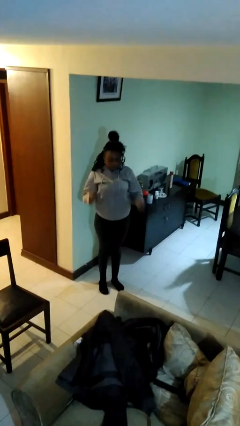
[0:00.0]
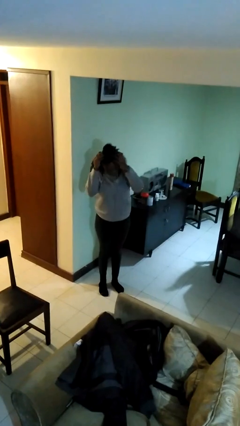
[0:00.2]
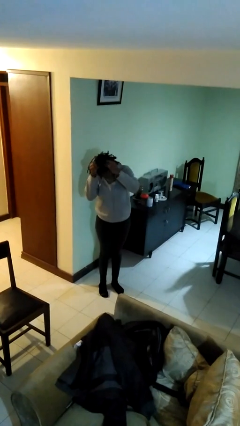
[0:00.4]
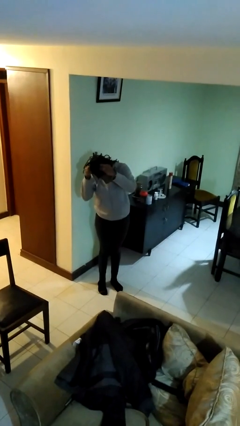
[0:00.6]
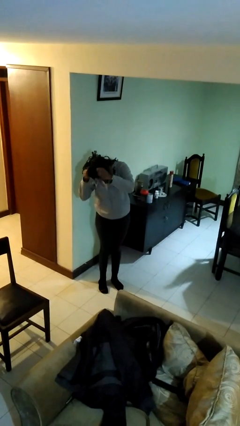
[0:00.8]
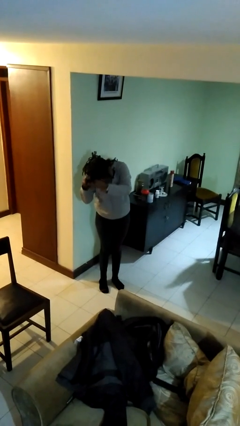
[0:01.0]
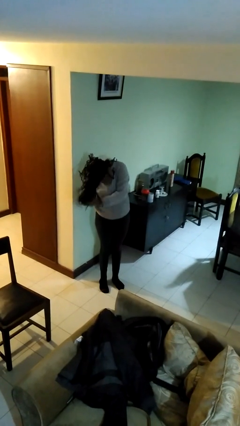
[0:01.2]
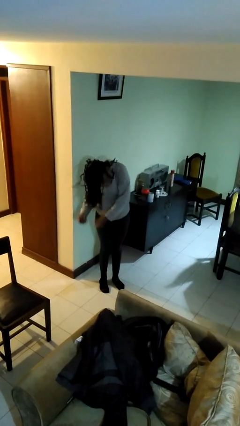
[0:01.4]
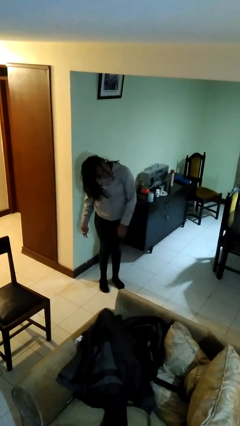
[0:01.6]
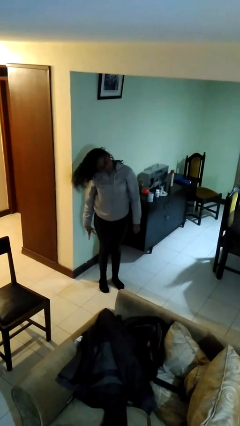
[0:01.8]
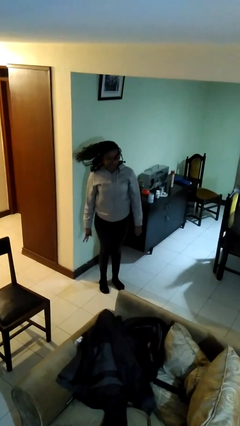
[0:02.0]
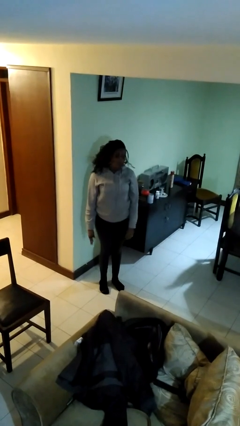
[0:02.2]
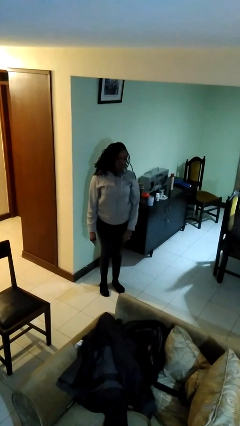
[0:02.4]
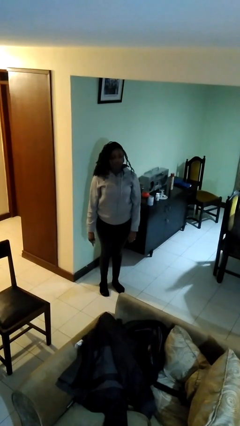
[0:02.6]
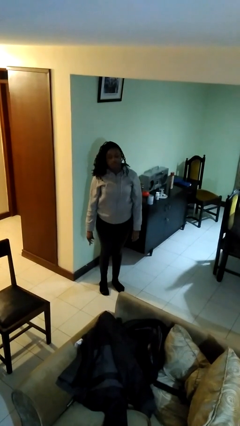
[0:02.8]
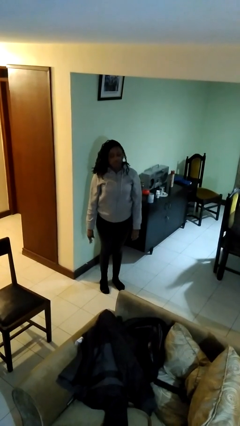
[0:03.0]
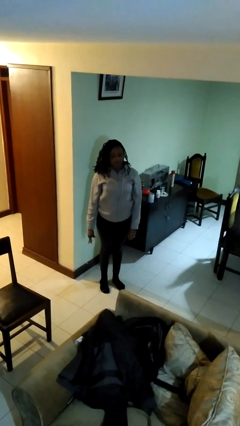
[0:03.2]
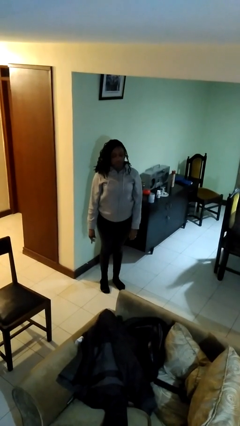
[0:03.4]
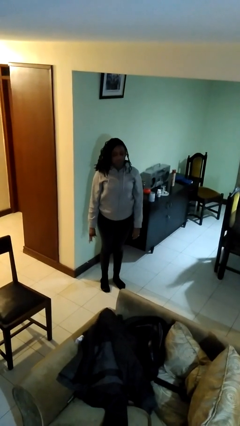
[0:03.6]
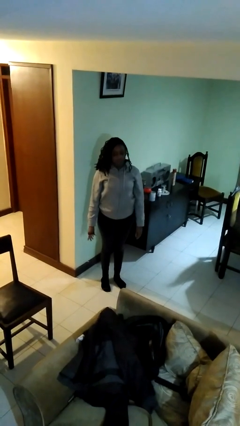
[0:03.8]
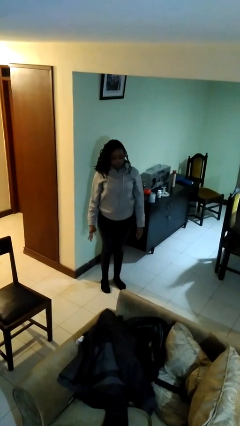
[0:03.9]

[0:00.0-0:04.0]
person takes off hairtie

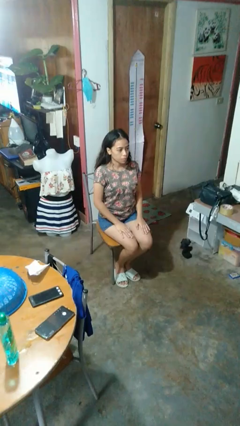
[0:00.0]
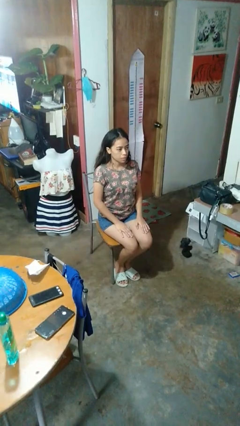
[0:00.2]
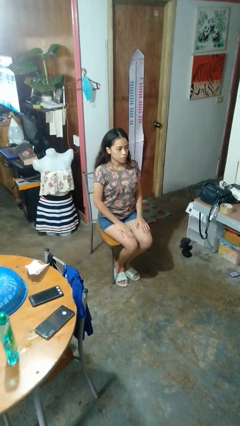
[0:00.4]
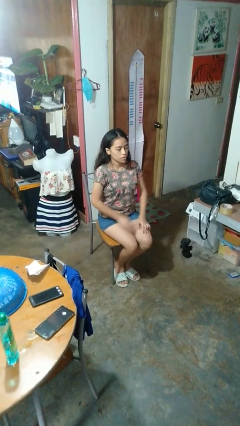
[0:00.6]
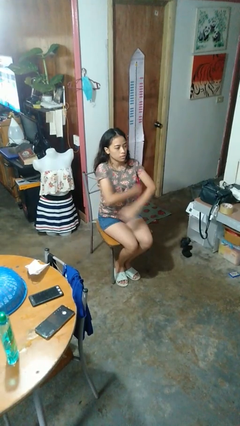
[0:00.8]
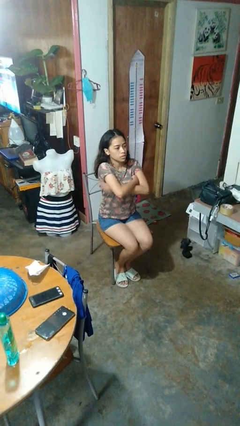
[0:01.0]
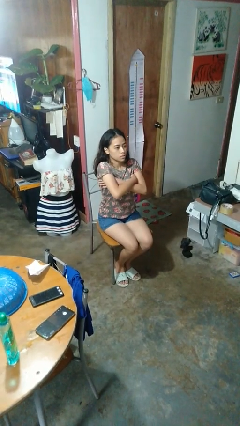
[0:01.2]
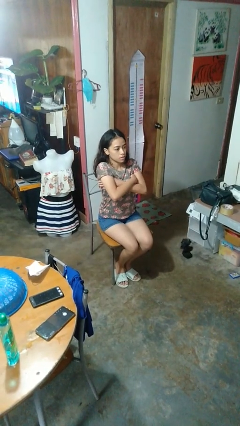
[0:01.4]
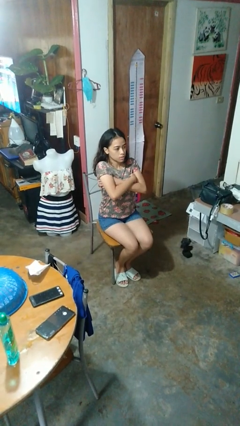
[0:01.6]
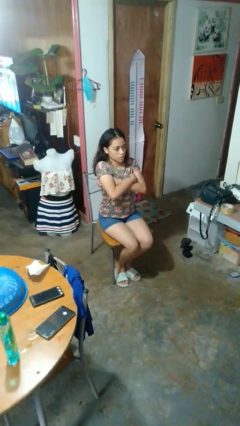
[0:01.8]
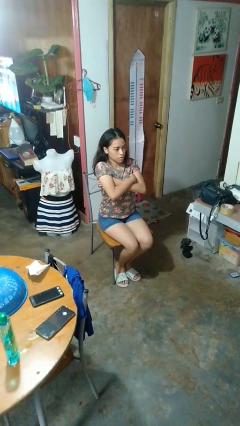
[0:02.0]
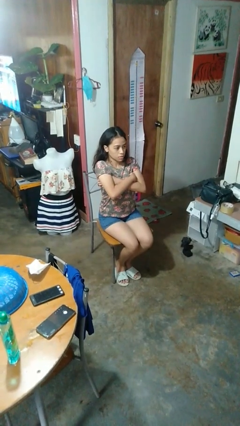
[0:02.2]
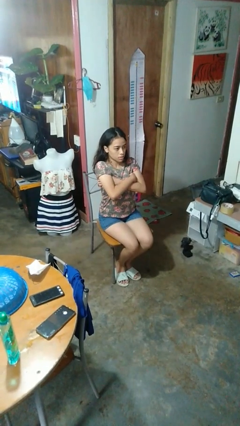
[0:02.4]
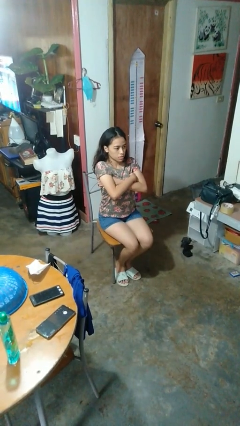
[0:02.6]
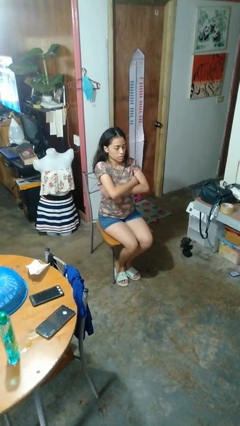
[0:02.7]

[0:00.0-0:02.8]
person crosses arms

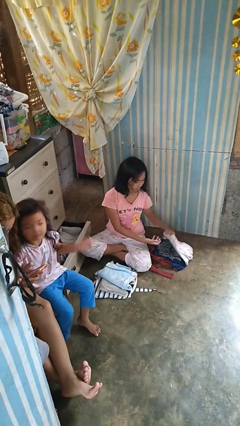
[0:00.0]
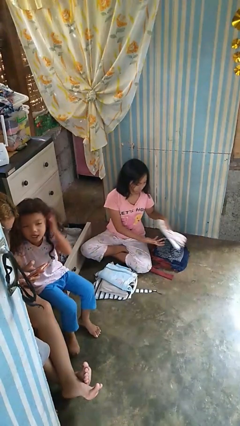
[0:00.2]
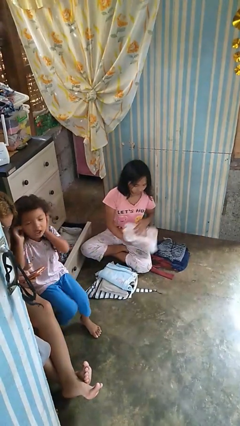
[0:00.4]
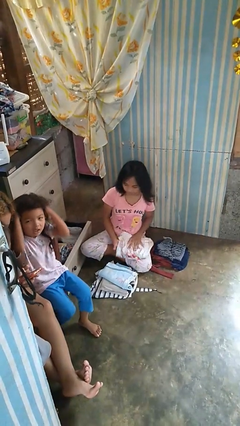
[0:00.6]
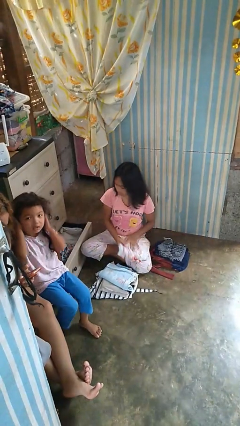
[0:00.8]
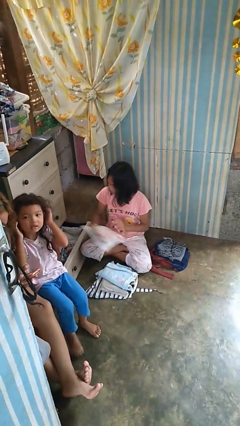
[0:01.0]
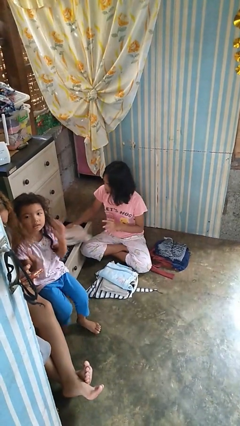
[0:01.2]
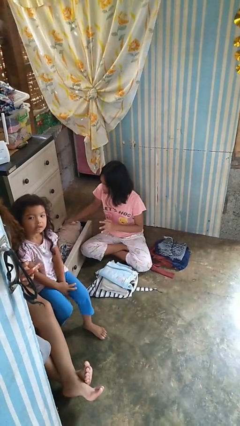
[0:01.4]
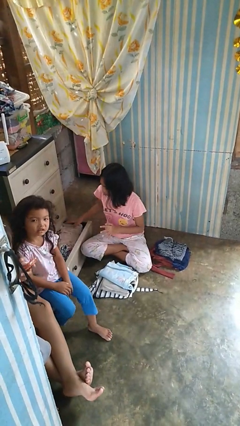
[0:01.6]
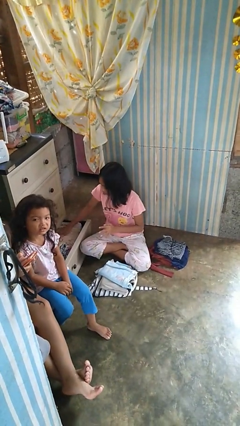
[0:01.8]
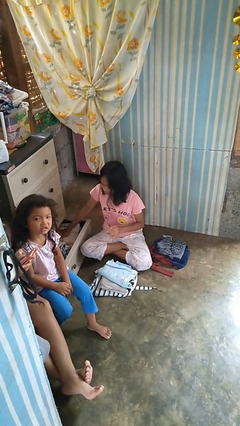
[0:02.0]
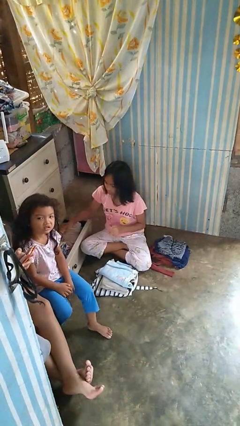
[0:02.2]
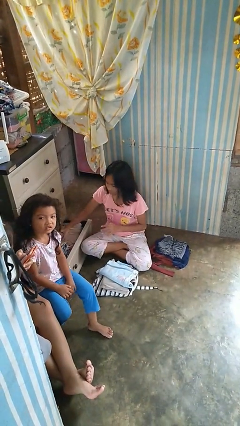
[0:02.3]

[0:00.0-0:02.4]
person puts clothes into dresser

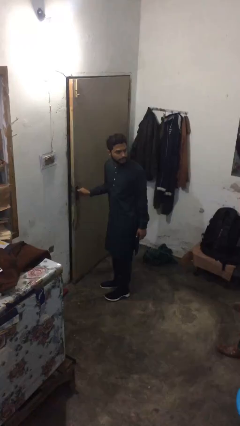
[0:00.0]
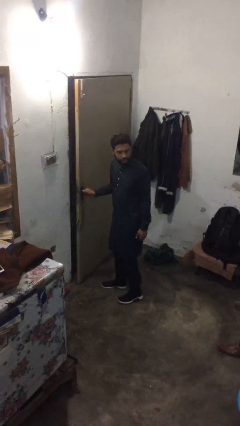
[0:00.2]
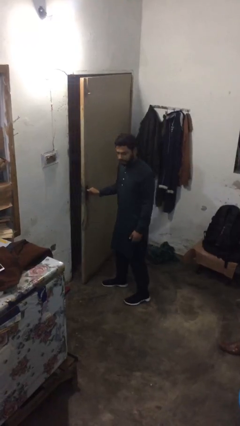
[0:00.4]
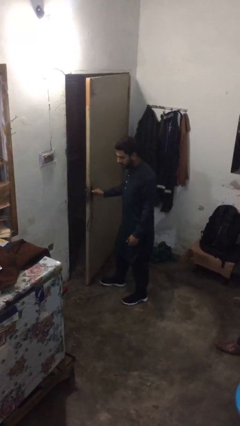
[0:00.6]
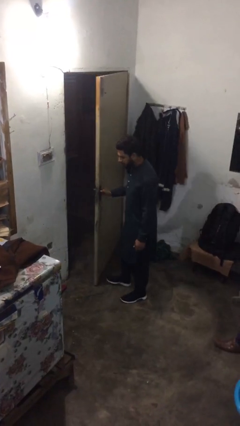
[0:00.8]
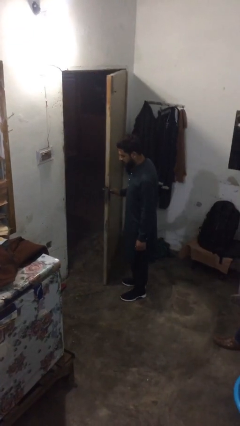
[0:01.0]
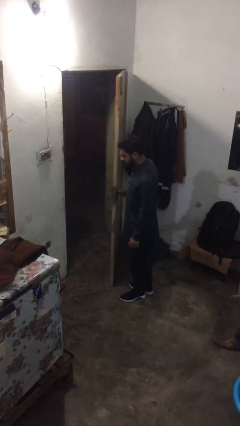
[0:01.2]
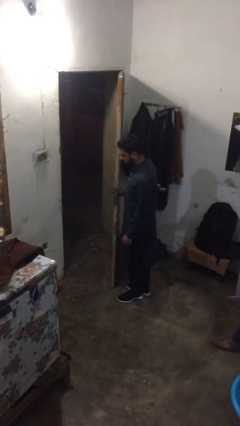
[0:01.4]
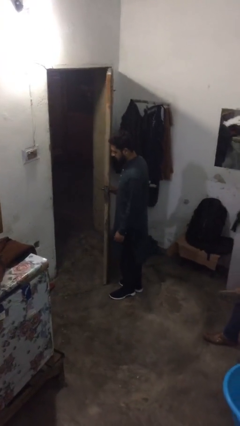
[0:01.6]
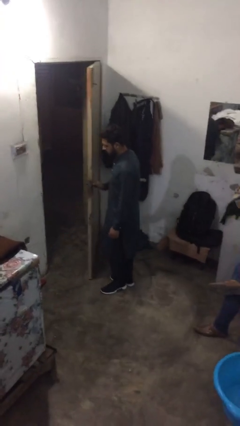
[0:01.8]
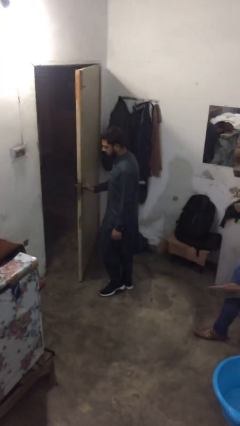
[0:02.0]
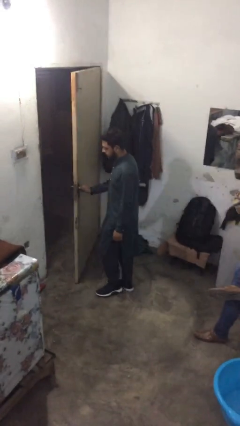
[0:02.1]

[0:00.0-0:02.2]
person opens facility door

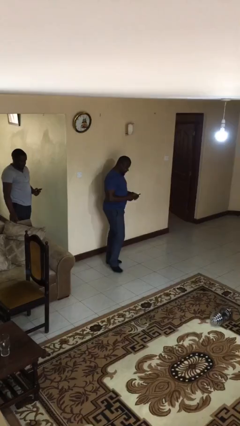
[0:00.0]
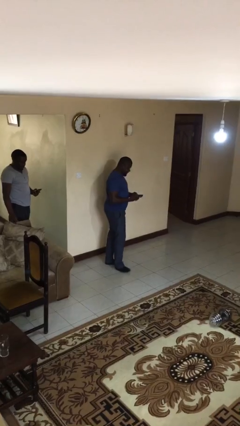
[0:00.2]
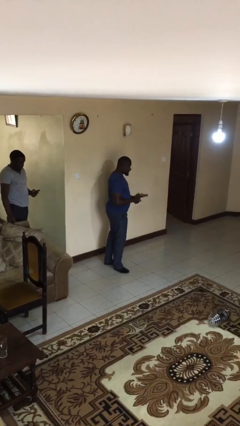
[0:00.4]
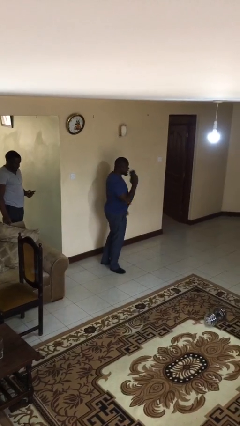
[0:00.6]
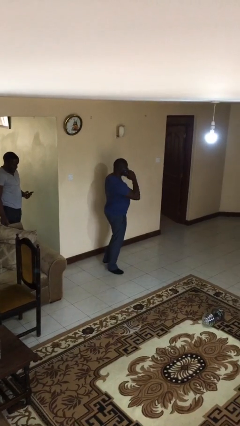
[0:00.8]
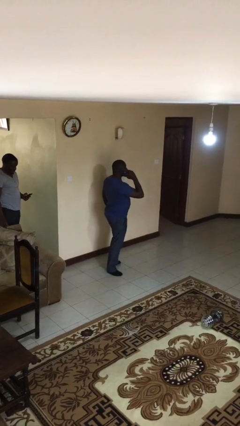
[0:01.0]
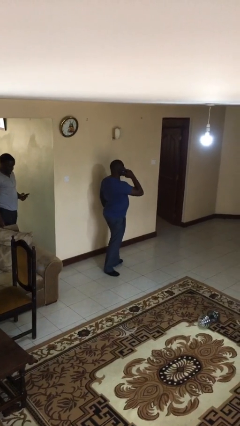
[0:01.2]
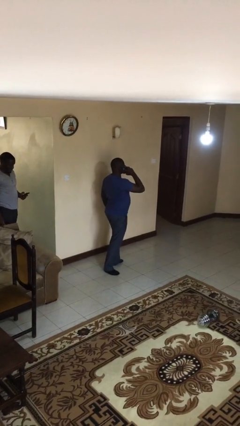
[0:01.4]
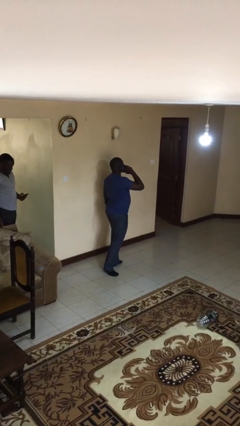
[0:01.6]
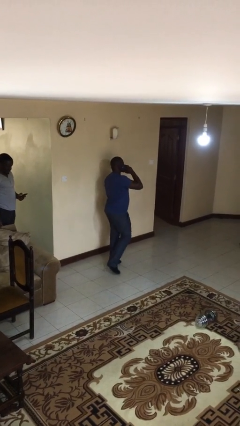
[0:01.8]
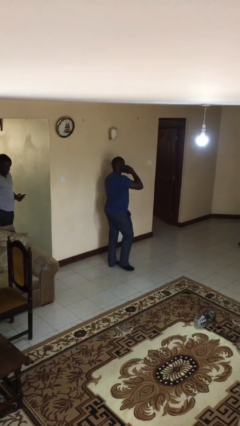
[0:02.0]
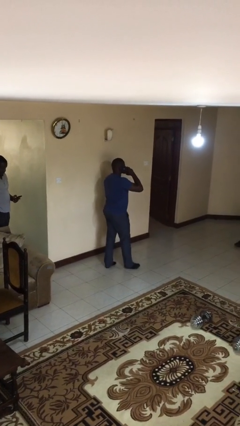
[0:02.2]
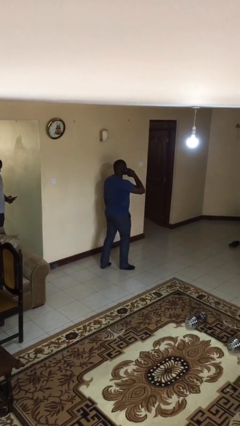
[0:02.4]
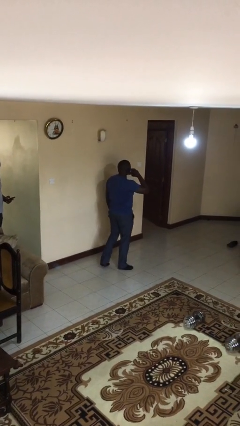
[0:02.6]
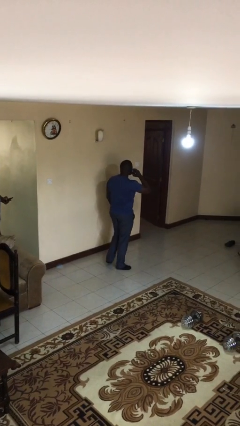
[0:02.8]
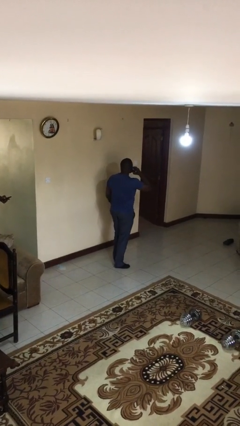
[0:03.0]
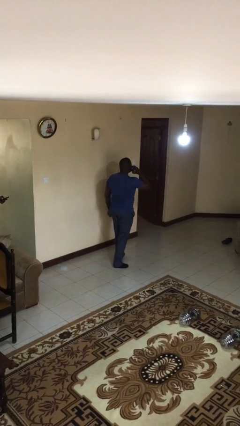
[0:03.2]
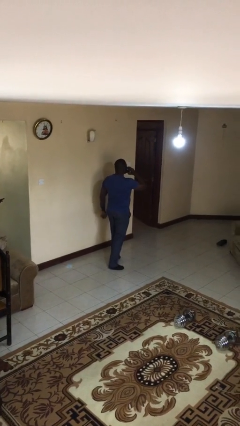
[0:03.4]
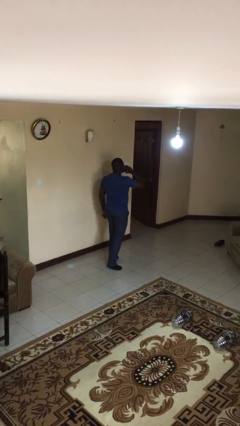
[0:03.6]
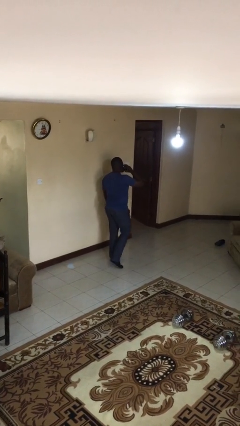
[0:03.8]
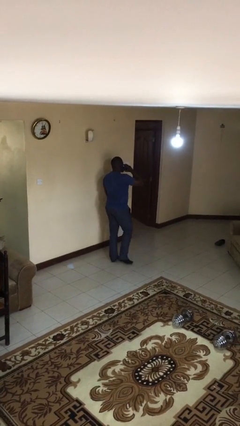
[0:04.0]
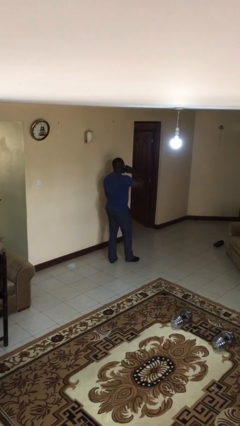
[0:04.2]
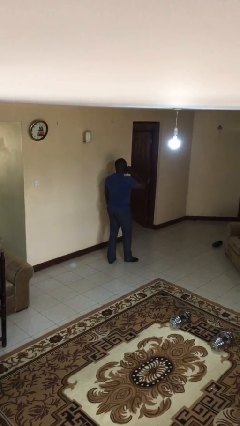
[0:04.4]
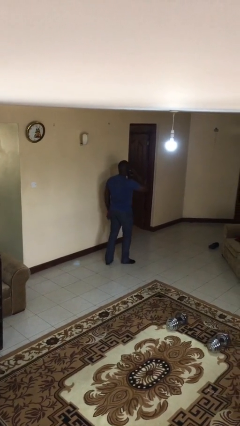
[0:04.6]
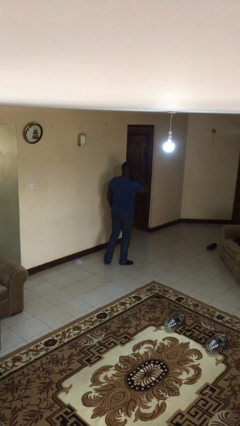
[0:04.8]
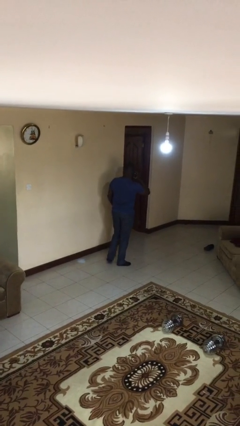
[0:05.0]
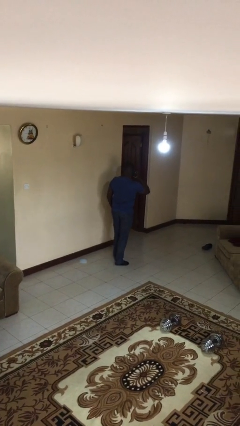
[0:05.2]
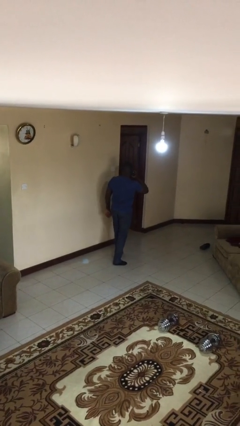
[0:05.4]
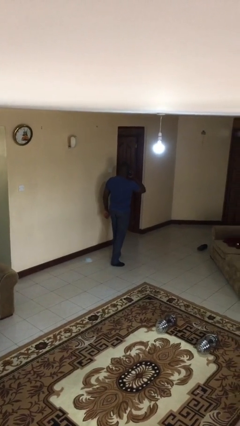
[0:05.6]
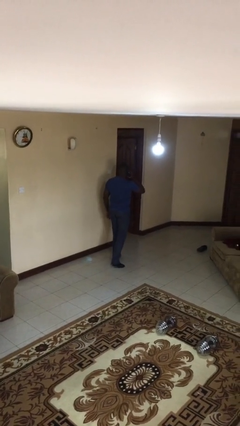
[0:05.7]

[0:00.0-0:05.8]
person talks on phone

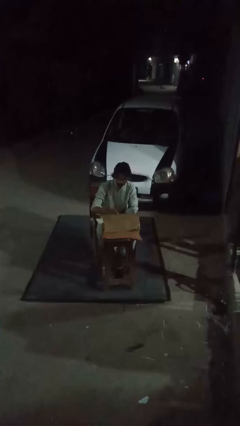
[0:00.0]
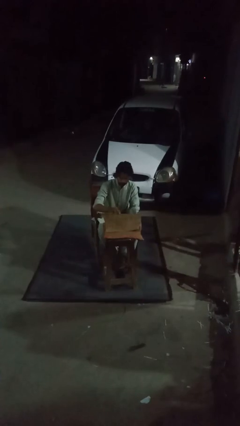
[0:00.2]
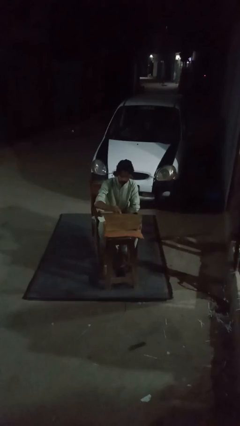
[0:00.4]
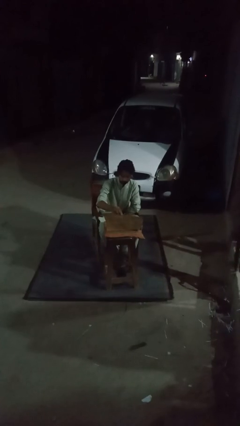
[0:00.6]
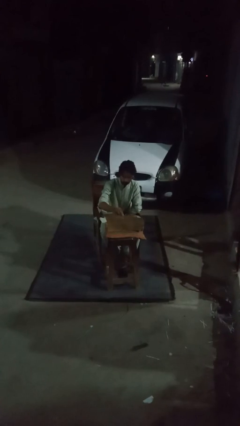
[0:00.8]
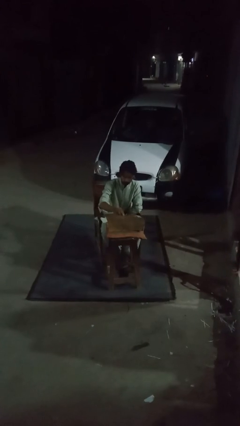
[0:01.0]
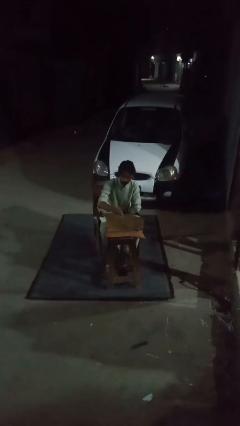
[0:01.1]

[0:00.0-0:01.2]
person opens laptop
